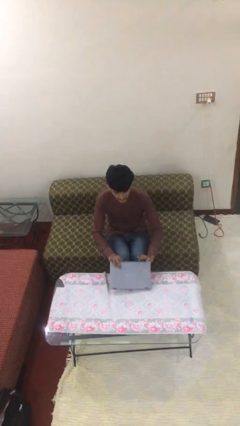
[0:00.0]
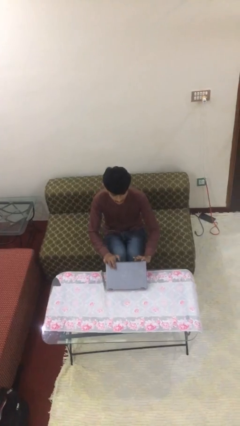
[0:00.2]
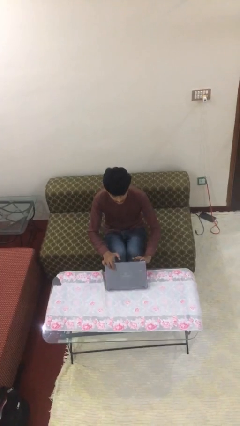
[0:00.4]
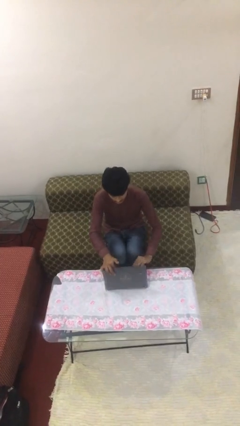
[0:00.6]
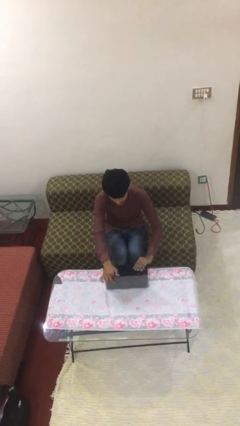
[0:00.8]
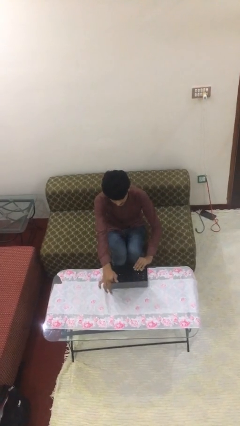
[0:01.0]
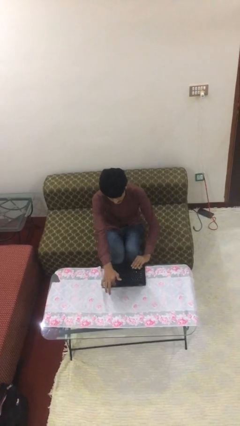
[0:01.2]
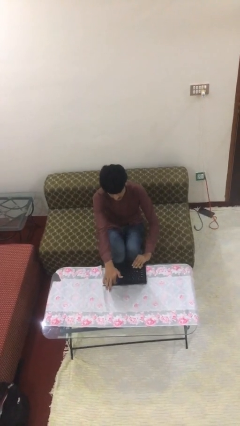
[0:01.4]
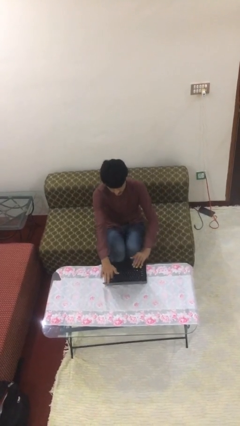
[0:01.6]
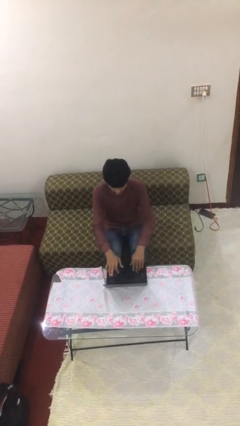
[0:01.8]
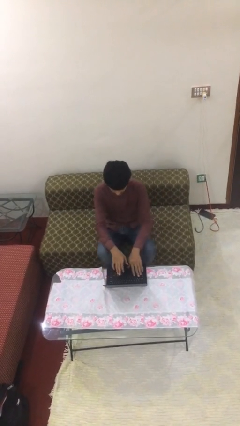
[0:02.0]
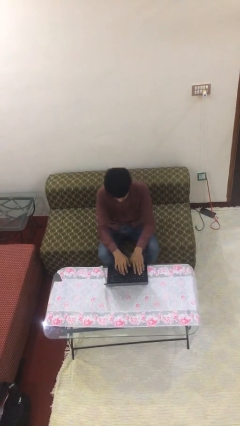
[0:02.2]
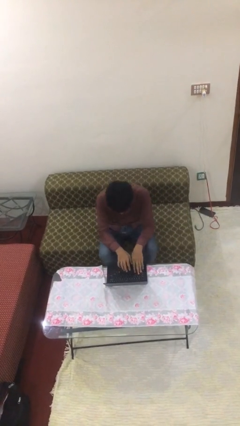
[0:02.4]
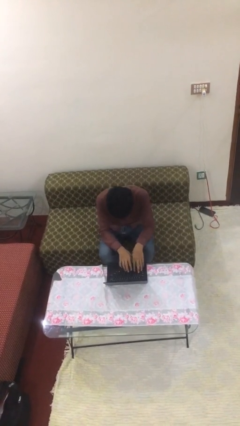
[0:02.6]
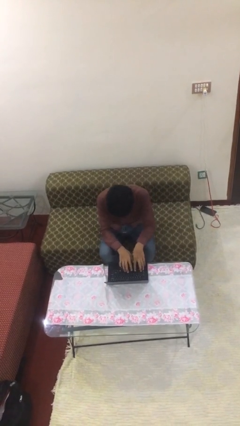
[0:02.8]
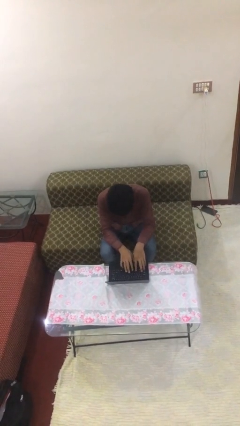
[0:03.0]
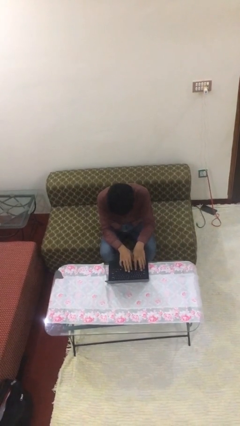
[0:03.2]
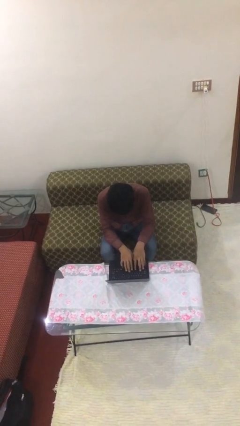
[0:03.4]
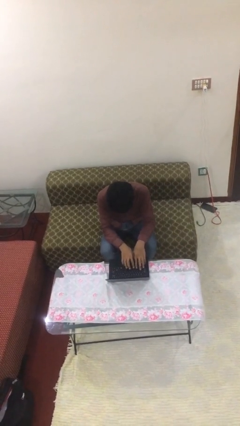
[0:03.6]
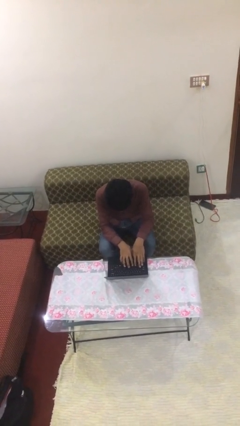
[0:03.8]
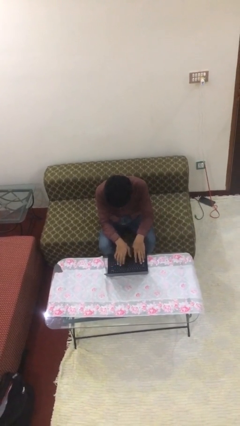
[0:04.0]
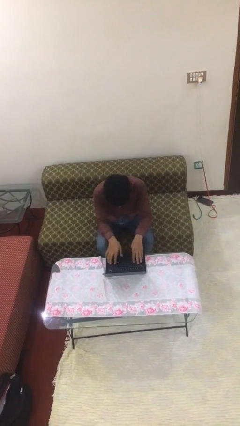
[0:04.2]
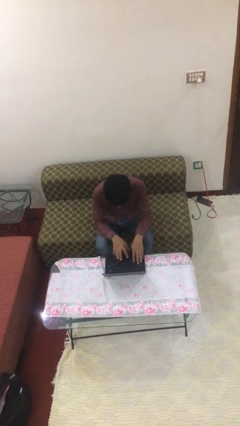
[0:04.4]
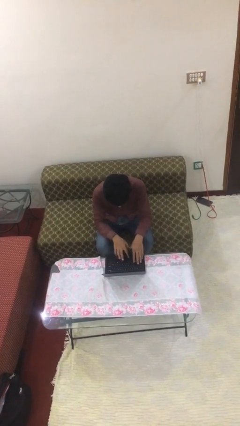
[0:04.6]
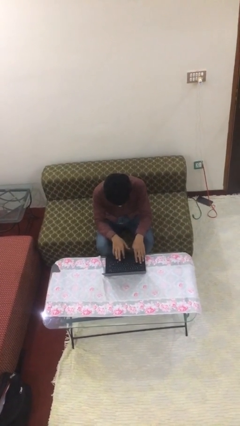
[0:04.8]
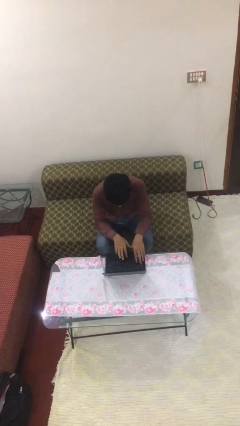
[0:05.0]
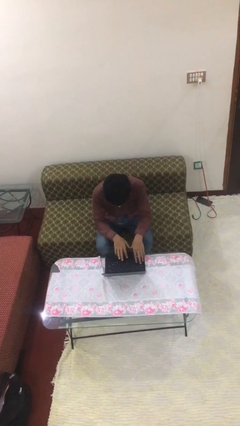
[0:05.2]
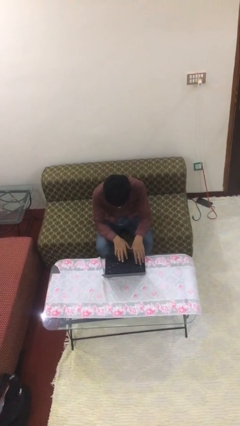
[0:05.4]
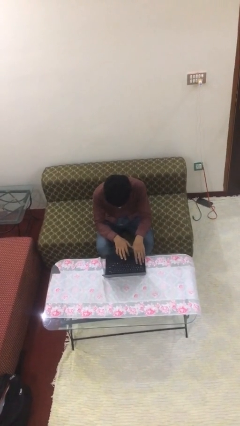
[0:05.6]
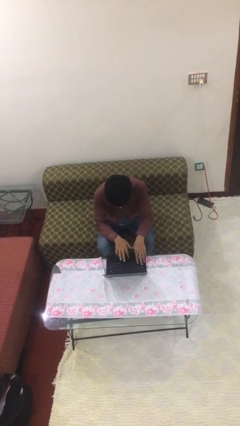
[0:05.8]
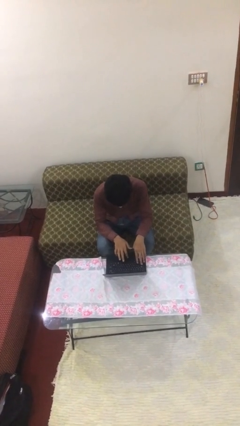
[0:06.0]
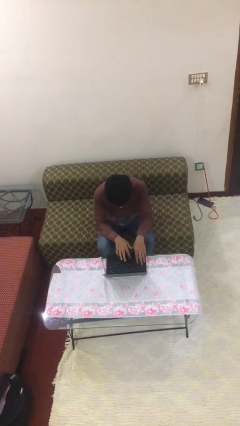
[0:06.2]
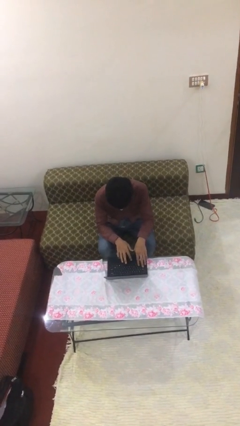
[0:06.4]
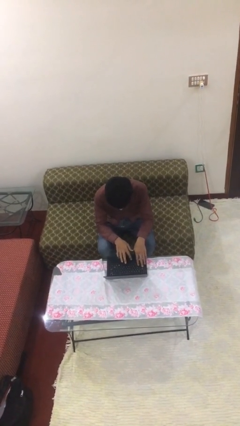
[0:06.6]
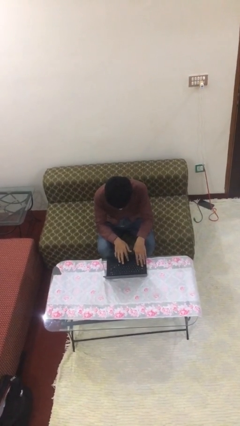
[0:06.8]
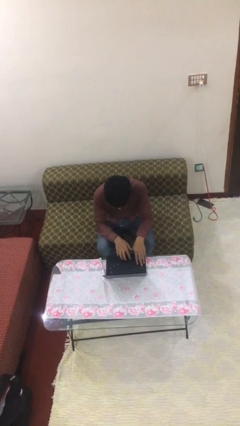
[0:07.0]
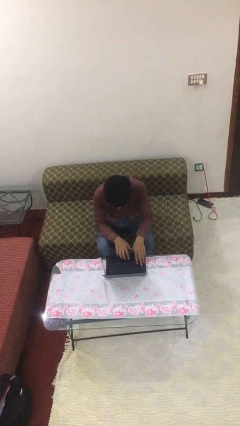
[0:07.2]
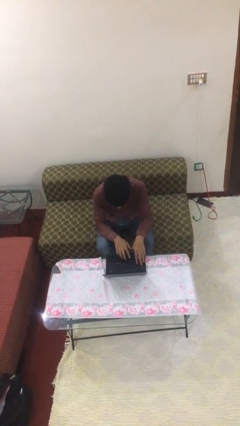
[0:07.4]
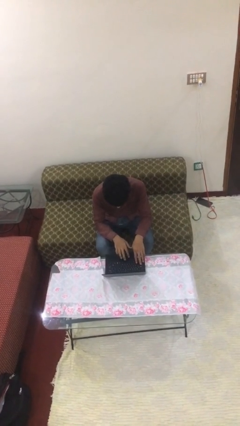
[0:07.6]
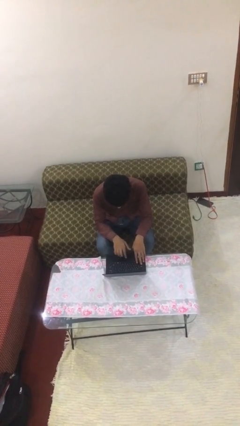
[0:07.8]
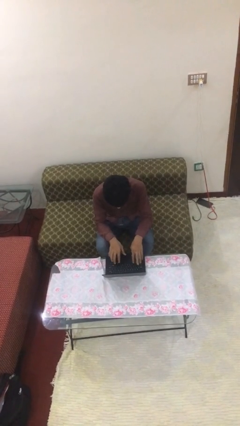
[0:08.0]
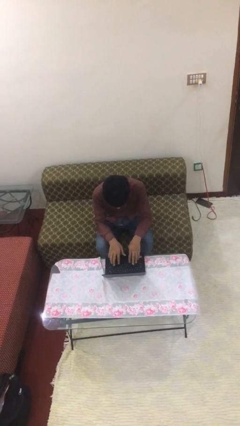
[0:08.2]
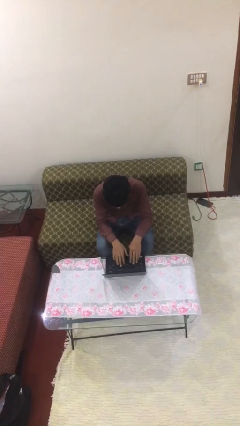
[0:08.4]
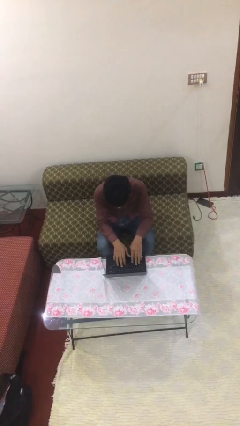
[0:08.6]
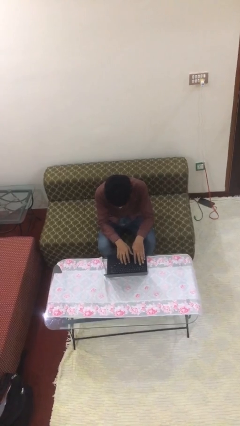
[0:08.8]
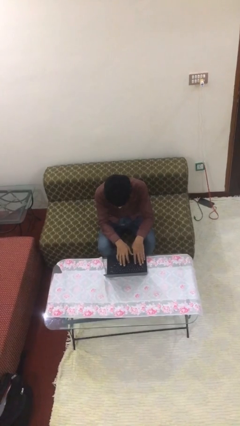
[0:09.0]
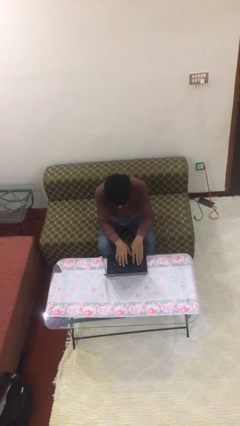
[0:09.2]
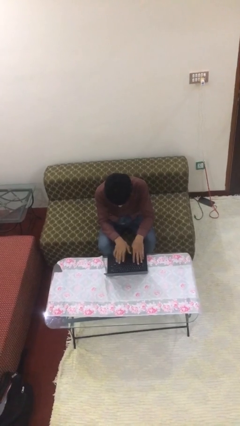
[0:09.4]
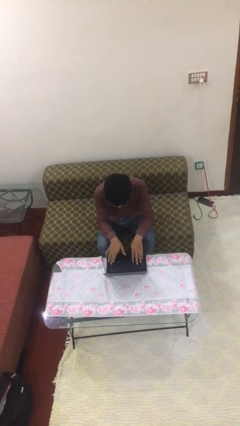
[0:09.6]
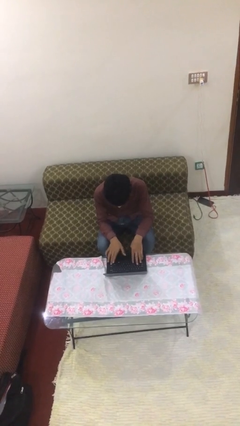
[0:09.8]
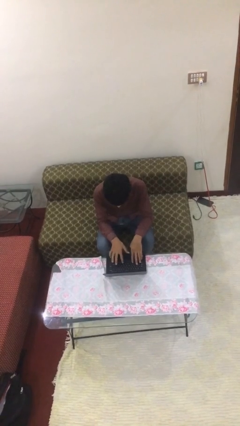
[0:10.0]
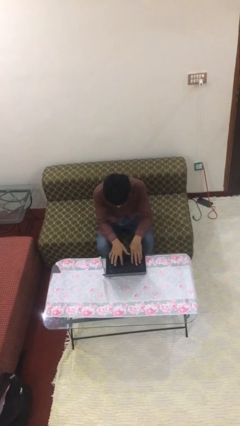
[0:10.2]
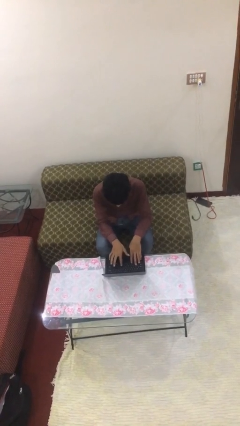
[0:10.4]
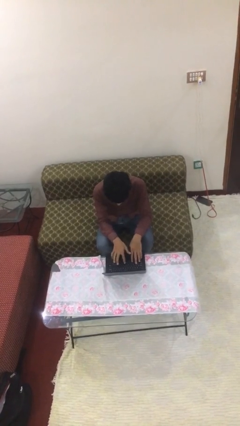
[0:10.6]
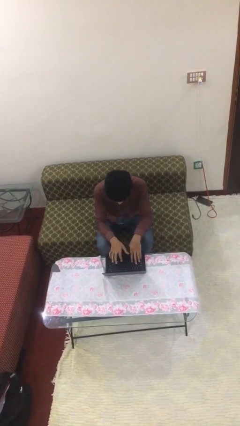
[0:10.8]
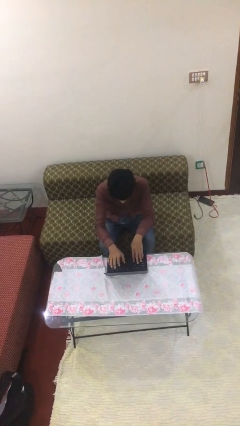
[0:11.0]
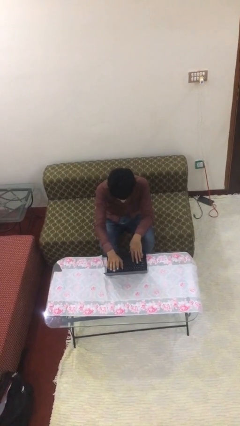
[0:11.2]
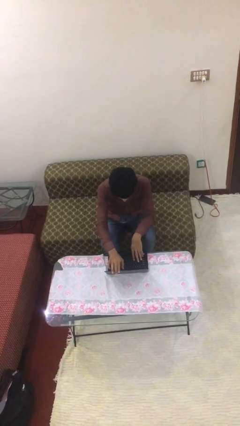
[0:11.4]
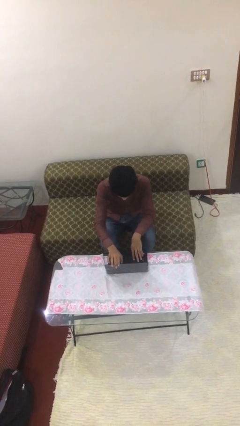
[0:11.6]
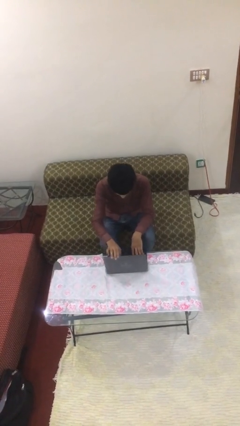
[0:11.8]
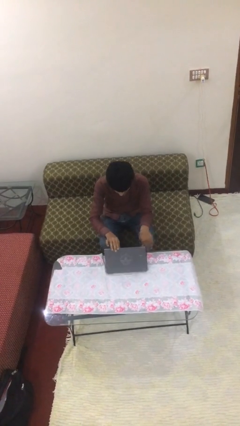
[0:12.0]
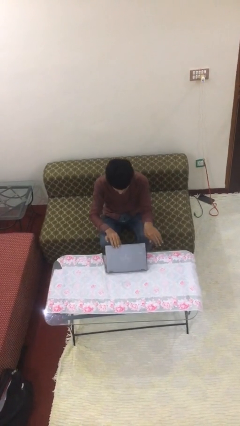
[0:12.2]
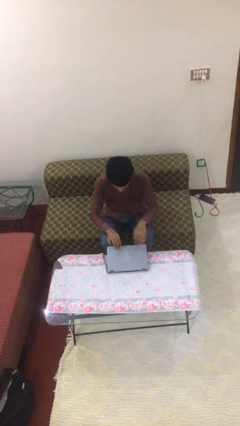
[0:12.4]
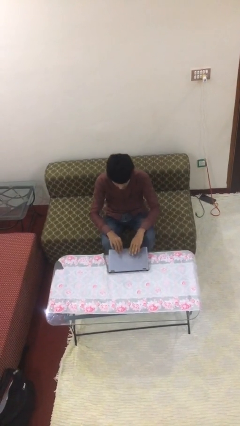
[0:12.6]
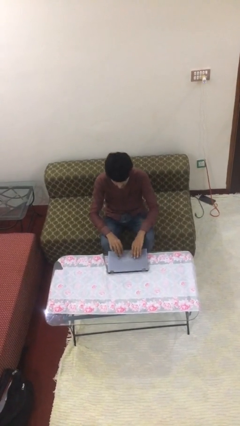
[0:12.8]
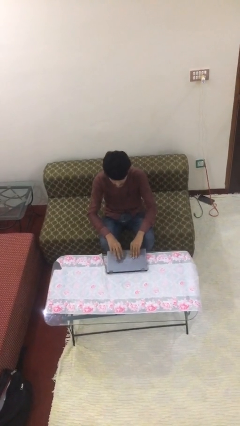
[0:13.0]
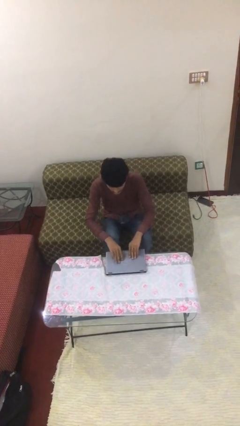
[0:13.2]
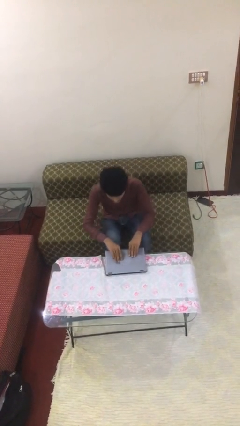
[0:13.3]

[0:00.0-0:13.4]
person interacts with laptop

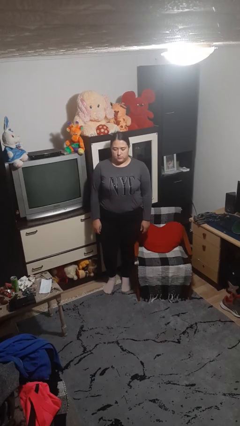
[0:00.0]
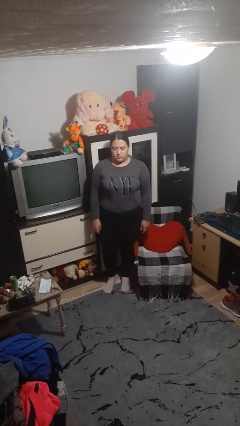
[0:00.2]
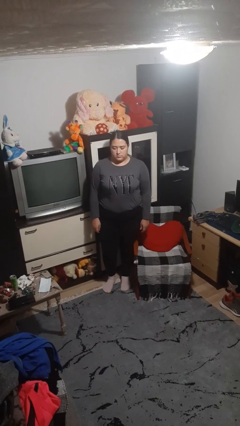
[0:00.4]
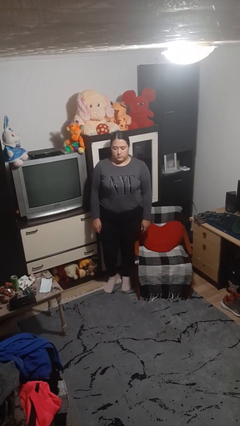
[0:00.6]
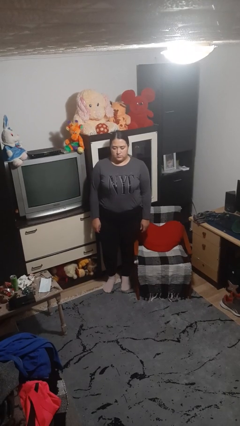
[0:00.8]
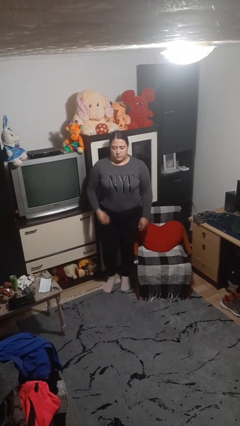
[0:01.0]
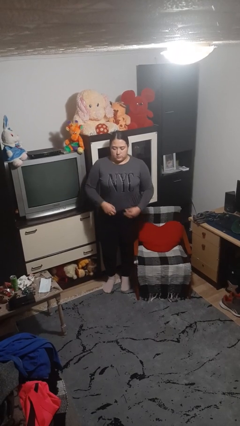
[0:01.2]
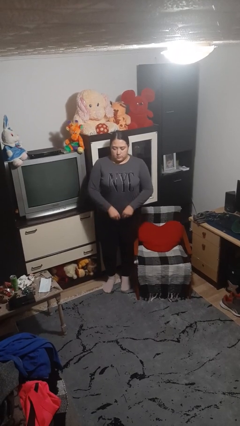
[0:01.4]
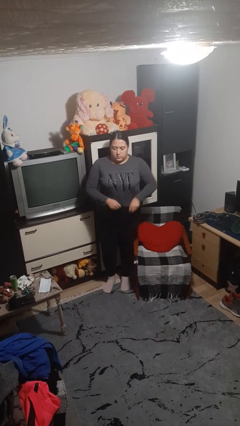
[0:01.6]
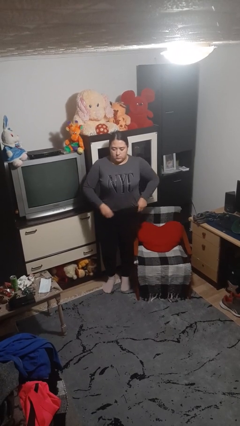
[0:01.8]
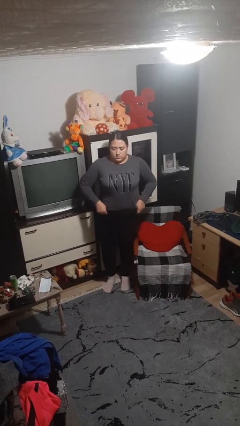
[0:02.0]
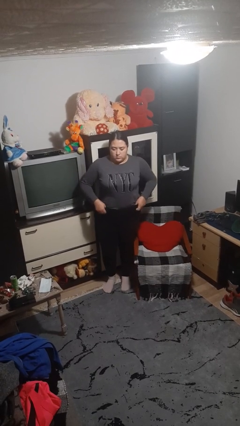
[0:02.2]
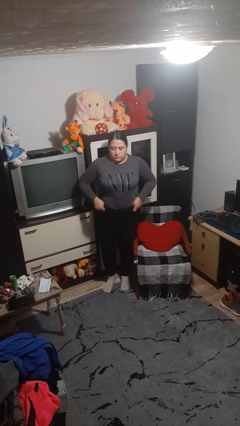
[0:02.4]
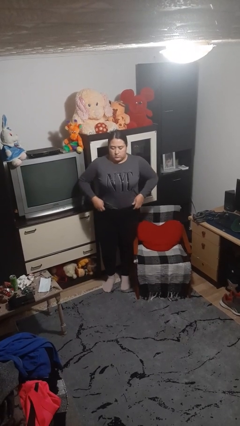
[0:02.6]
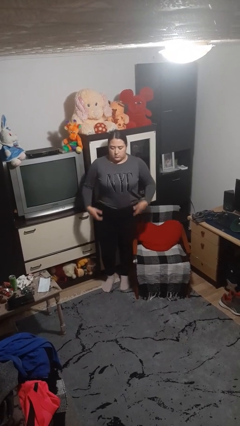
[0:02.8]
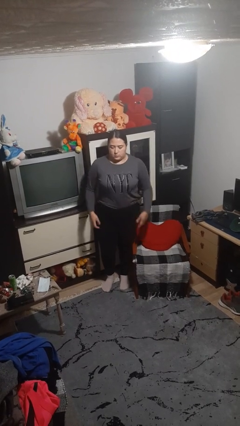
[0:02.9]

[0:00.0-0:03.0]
person hikes up pants

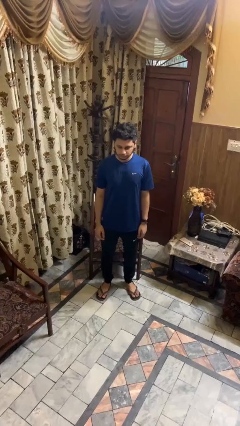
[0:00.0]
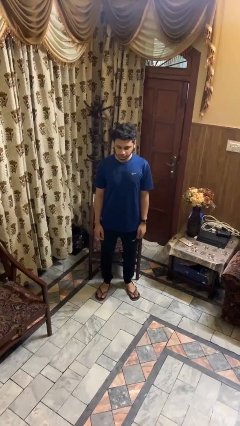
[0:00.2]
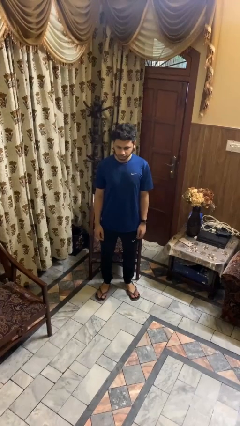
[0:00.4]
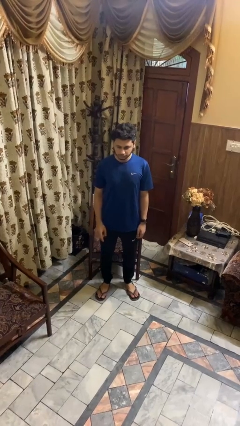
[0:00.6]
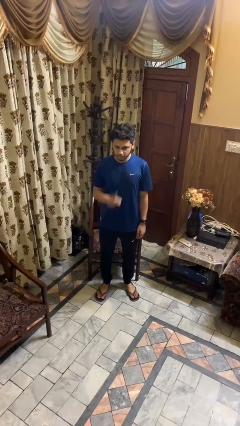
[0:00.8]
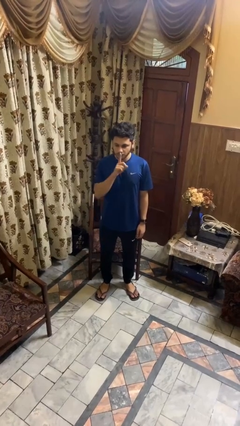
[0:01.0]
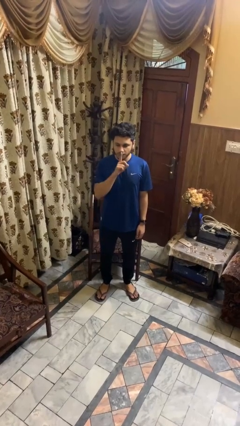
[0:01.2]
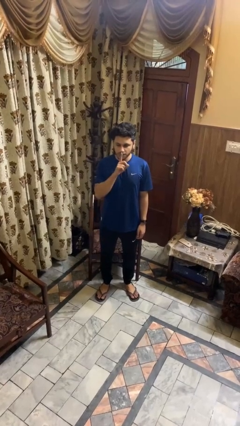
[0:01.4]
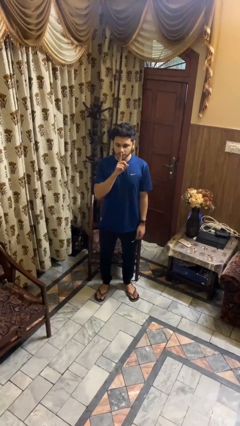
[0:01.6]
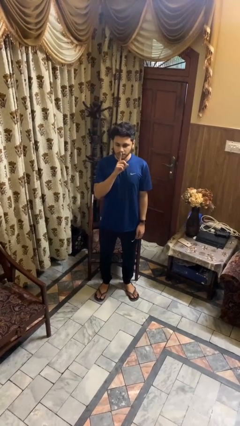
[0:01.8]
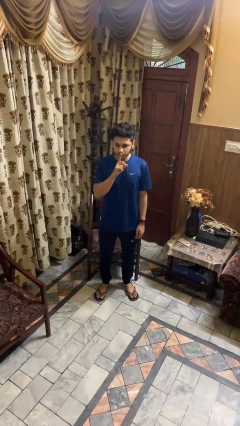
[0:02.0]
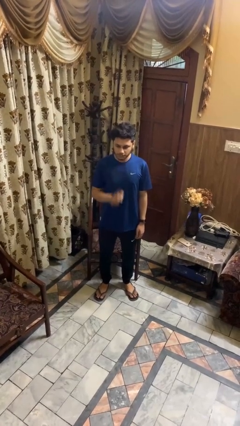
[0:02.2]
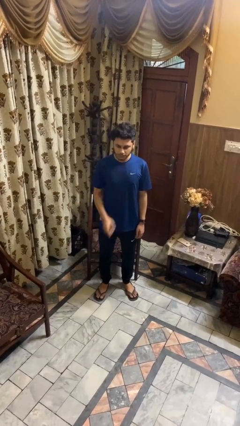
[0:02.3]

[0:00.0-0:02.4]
person gestures be quiet
